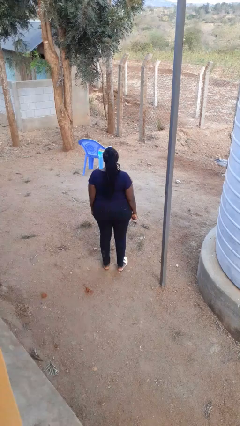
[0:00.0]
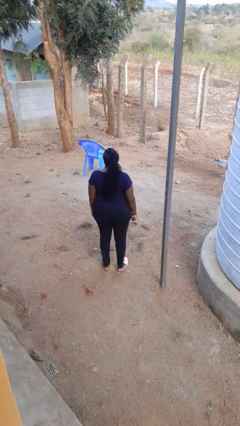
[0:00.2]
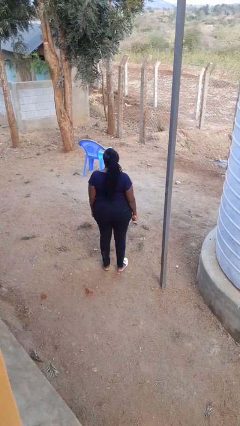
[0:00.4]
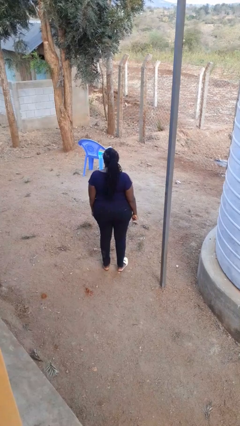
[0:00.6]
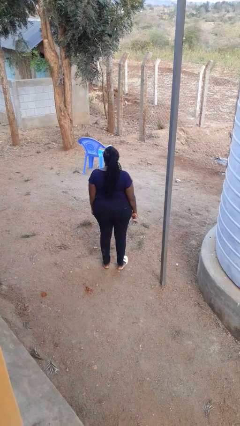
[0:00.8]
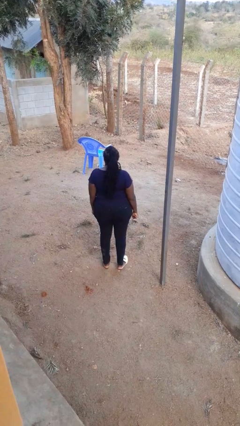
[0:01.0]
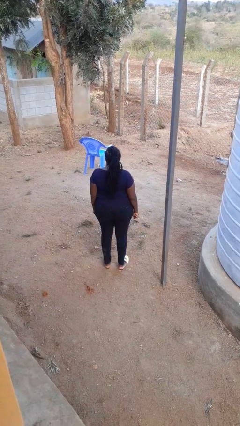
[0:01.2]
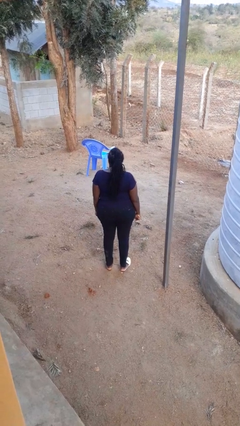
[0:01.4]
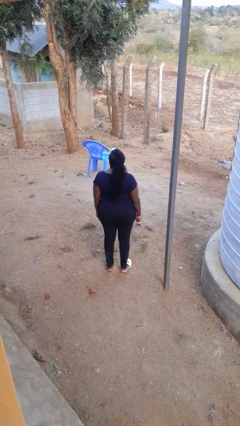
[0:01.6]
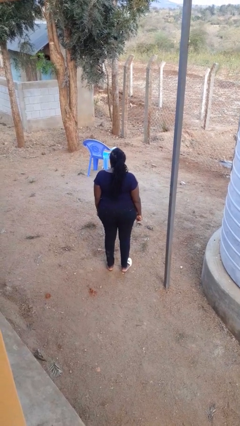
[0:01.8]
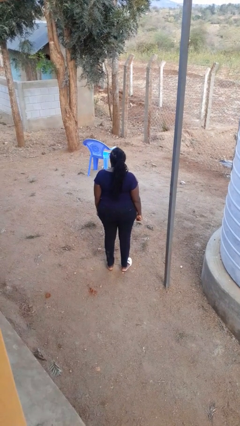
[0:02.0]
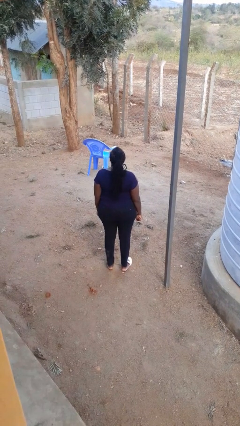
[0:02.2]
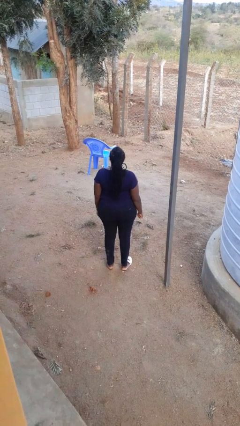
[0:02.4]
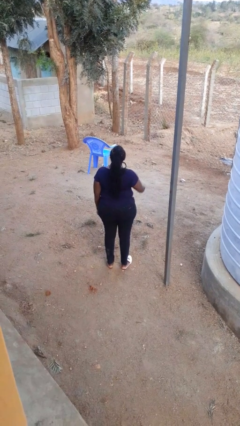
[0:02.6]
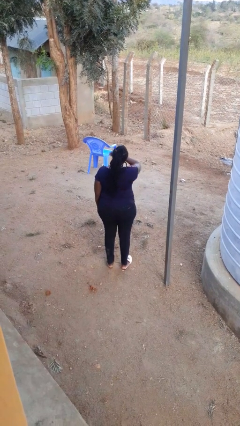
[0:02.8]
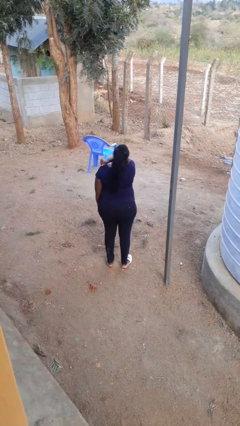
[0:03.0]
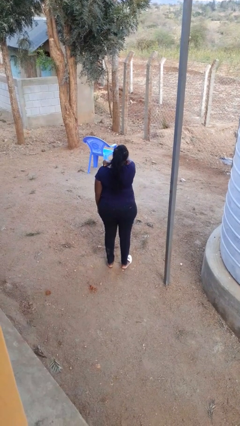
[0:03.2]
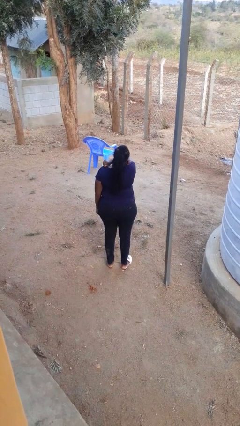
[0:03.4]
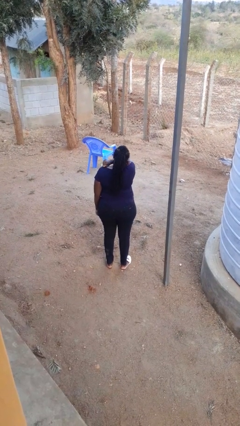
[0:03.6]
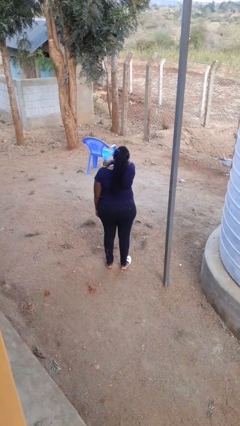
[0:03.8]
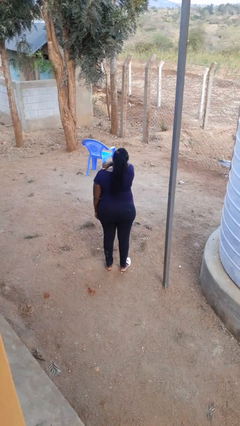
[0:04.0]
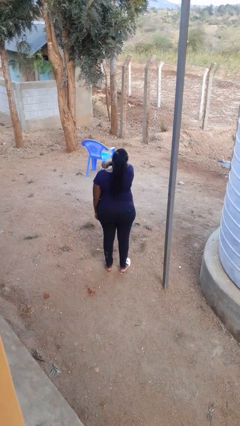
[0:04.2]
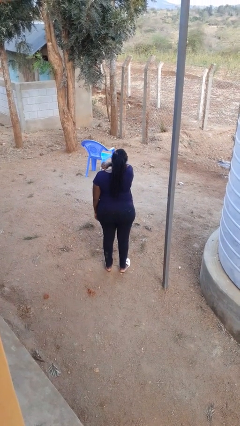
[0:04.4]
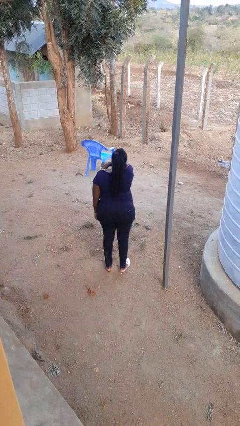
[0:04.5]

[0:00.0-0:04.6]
person sneezes into arm

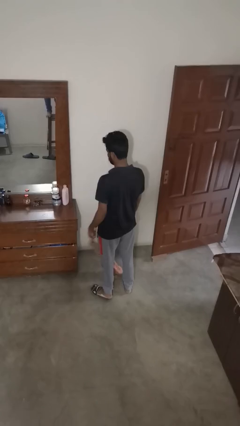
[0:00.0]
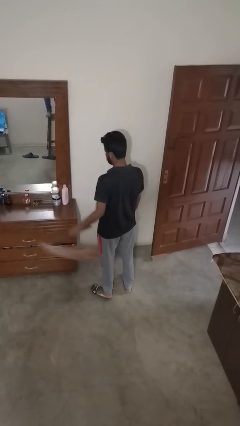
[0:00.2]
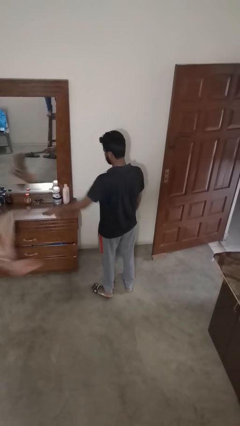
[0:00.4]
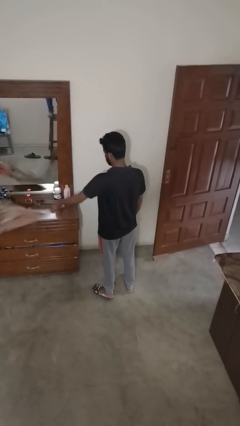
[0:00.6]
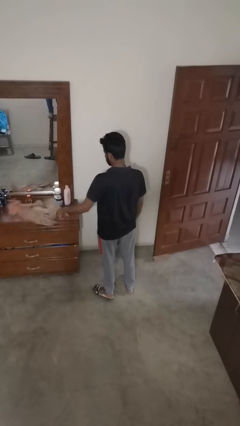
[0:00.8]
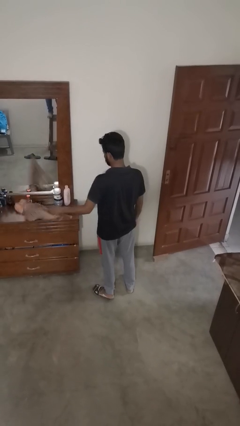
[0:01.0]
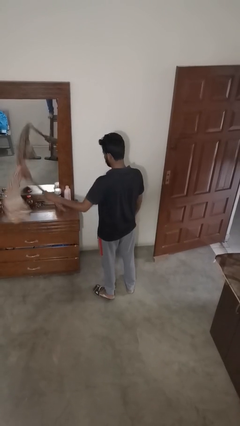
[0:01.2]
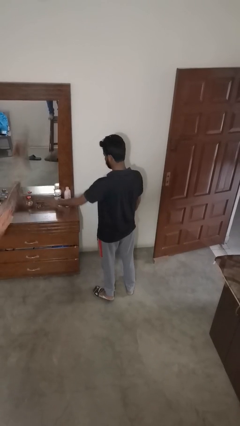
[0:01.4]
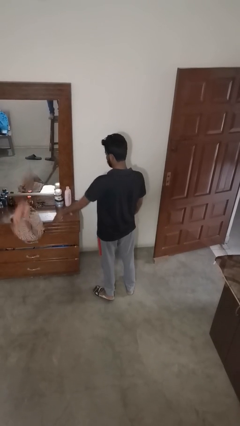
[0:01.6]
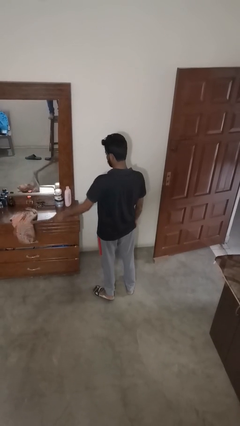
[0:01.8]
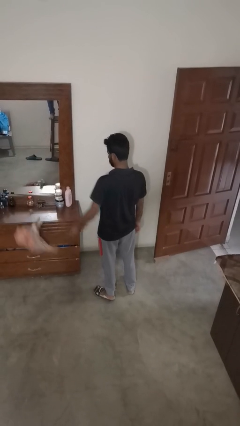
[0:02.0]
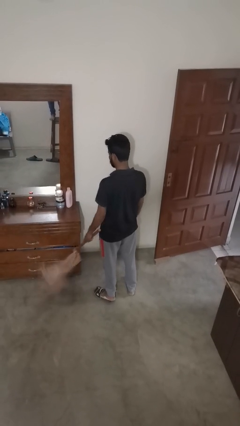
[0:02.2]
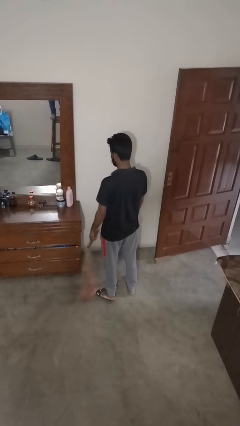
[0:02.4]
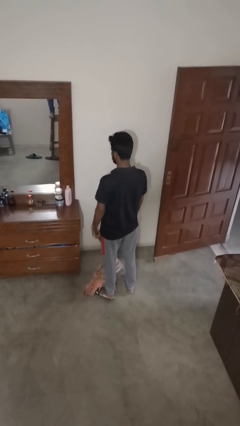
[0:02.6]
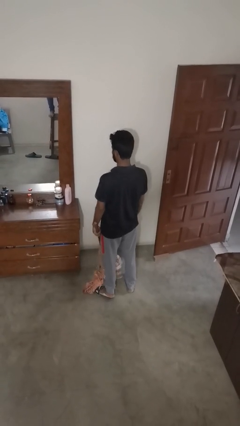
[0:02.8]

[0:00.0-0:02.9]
person dusts furniture

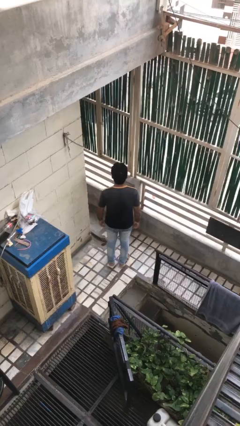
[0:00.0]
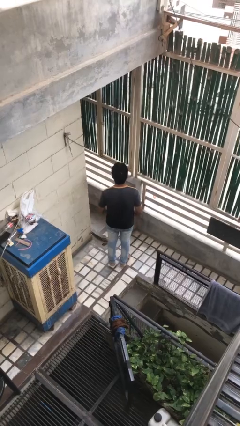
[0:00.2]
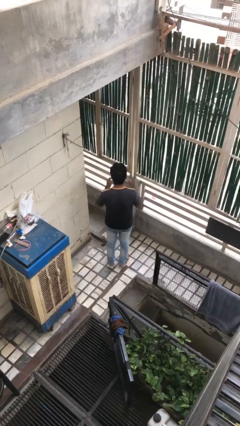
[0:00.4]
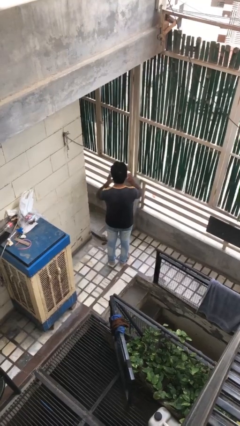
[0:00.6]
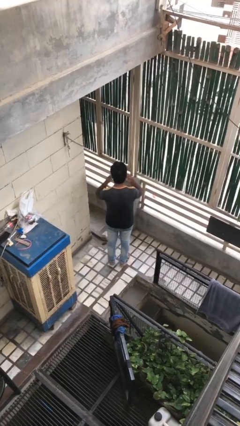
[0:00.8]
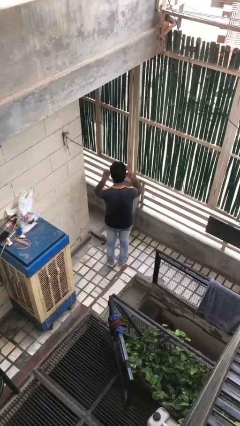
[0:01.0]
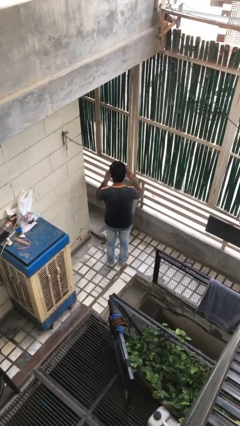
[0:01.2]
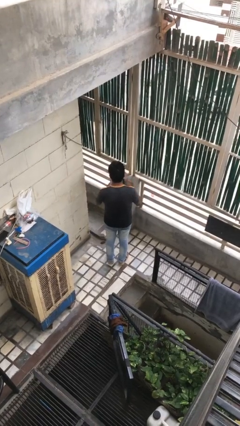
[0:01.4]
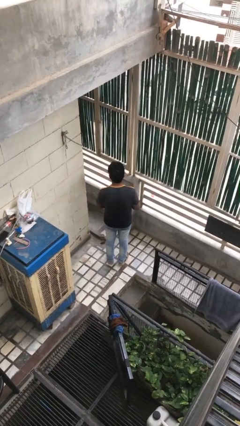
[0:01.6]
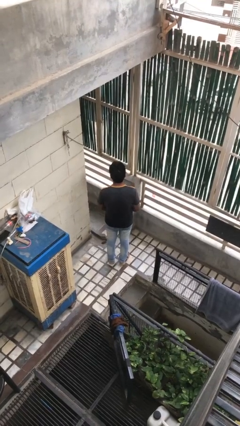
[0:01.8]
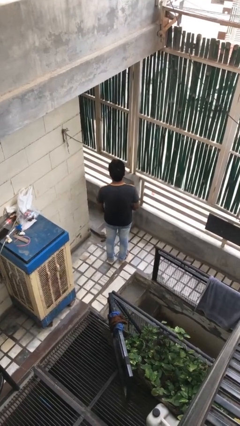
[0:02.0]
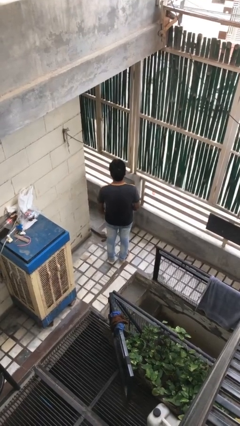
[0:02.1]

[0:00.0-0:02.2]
person takes off facemask

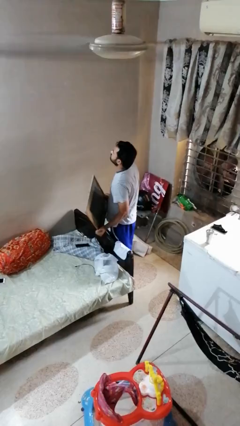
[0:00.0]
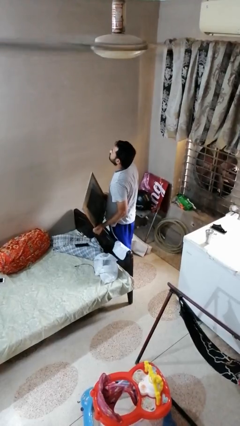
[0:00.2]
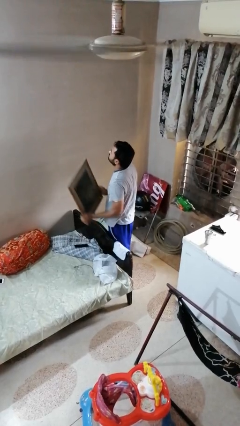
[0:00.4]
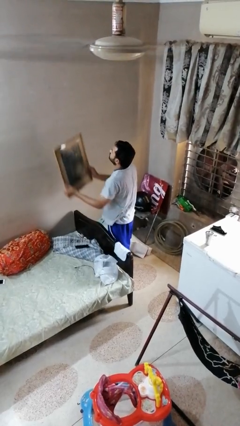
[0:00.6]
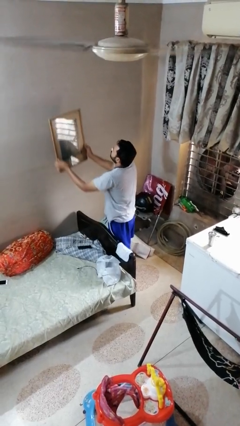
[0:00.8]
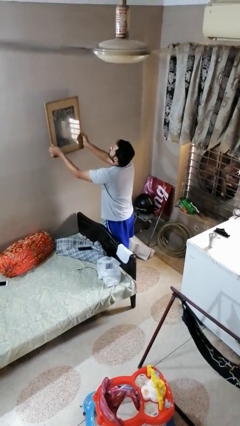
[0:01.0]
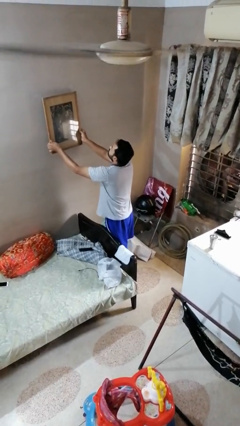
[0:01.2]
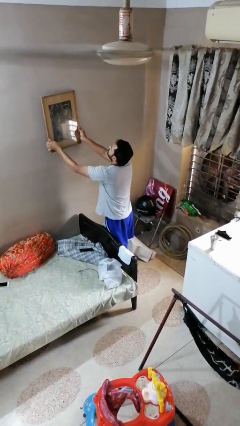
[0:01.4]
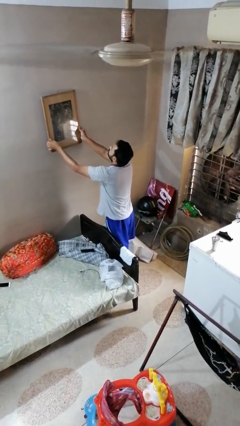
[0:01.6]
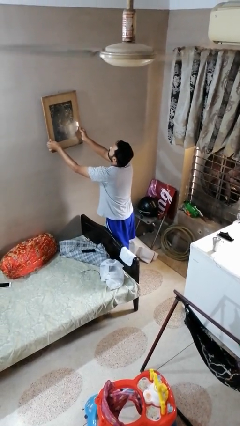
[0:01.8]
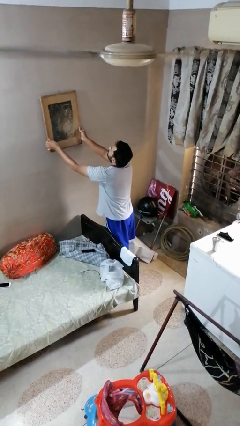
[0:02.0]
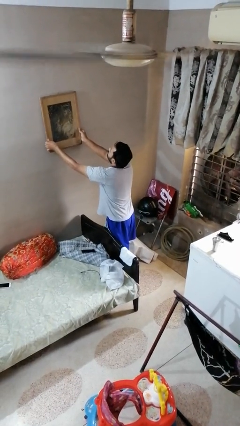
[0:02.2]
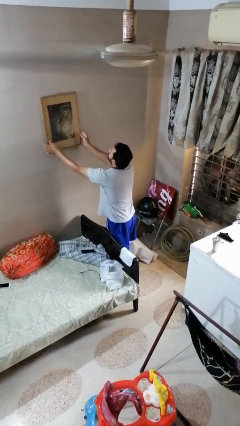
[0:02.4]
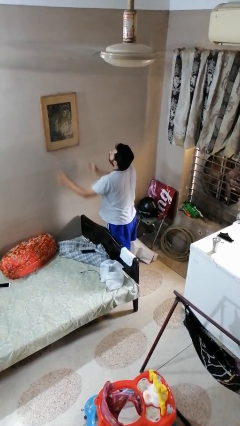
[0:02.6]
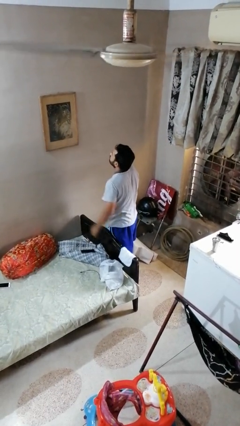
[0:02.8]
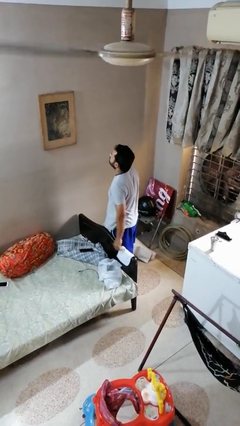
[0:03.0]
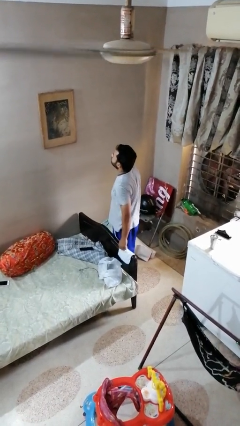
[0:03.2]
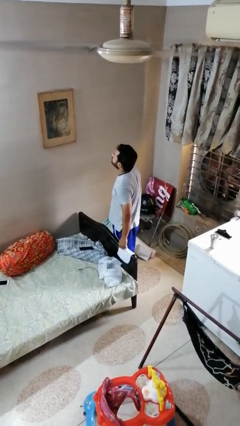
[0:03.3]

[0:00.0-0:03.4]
person puts up picture frame

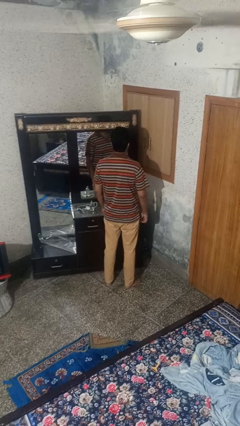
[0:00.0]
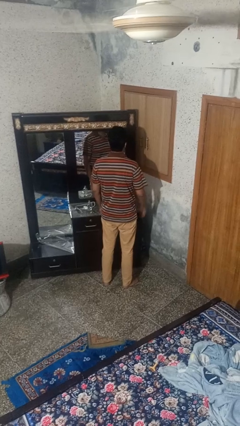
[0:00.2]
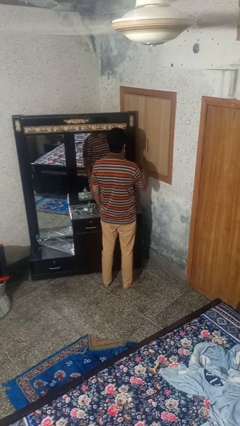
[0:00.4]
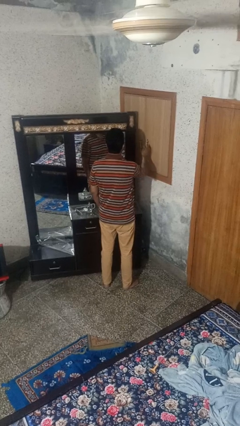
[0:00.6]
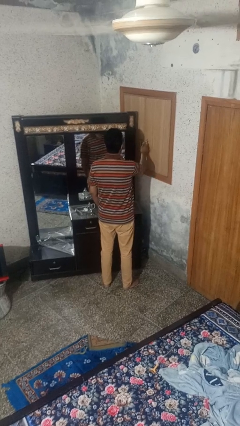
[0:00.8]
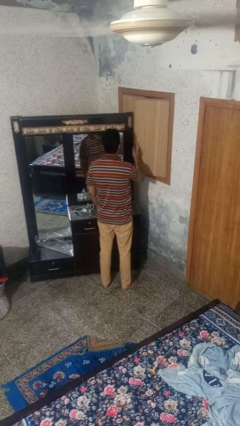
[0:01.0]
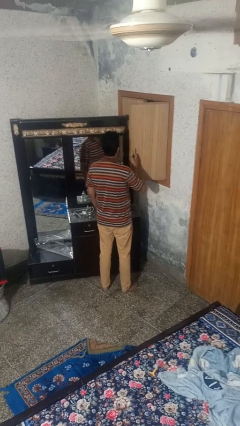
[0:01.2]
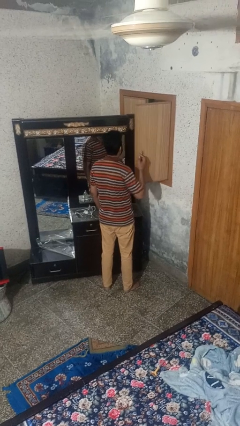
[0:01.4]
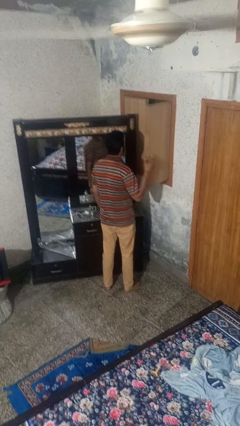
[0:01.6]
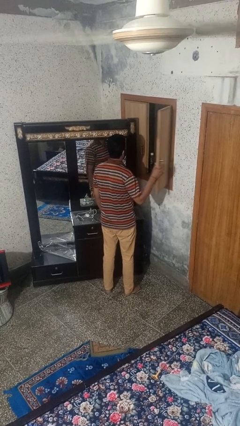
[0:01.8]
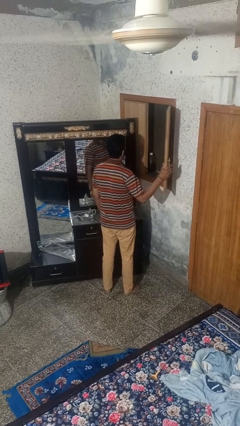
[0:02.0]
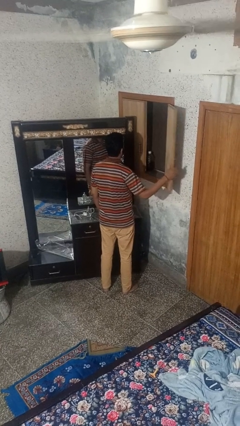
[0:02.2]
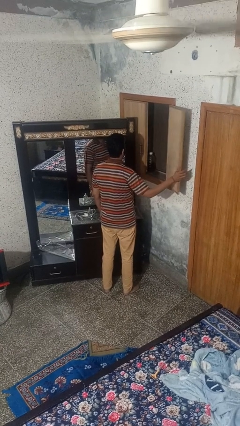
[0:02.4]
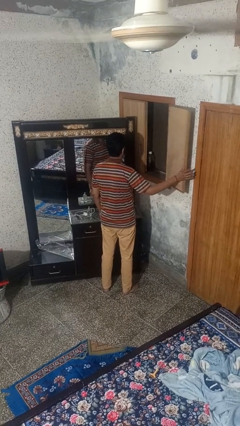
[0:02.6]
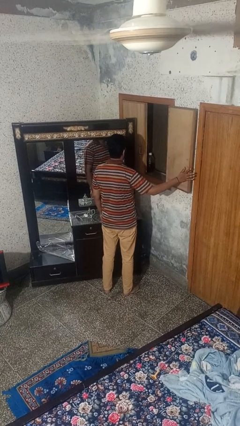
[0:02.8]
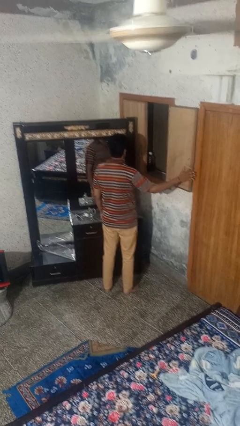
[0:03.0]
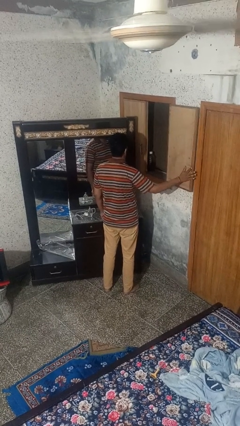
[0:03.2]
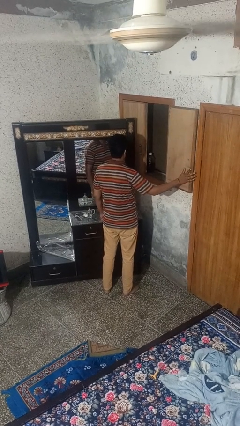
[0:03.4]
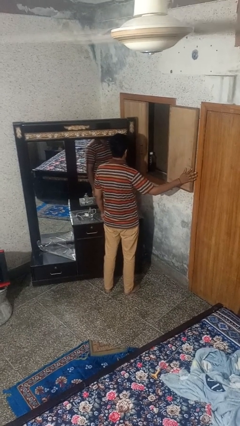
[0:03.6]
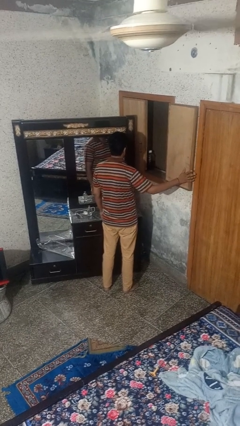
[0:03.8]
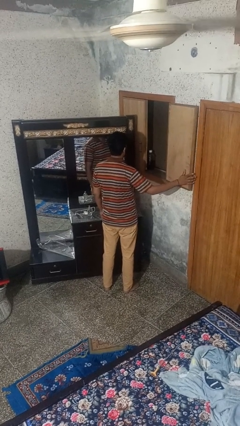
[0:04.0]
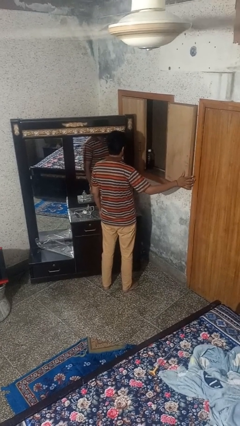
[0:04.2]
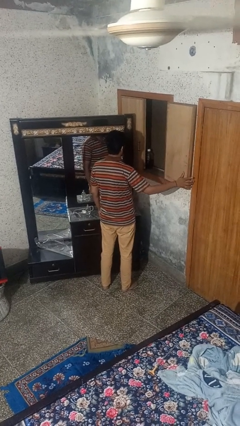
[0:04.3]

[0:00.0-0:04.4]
person opens home window

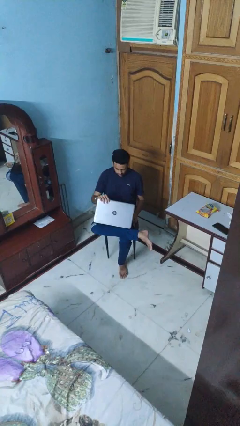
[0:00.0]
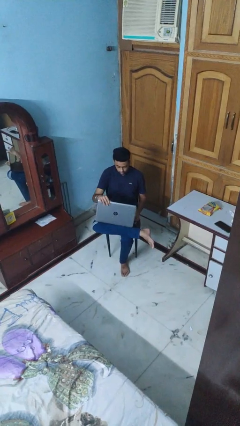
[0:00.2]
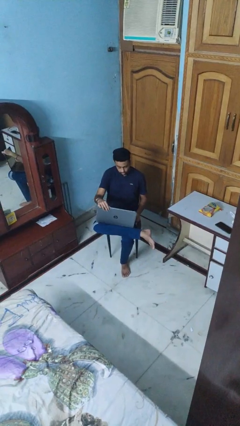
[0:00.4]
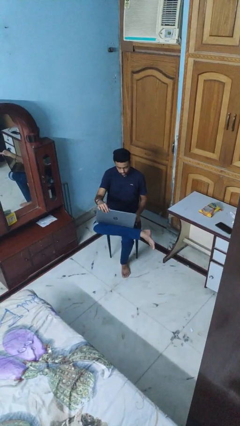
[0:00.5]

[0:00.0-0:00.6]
person opens laptop
